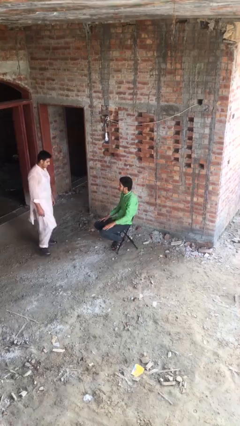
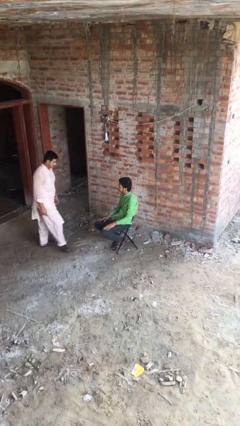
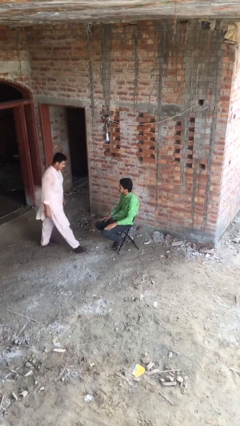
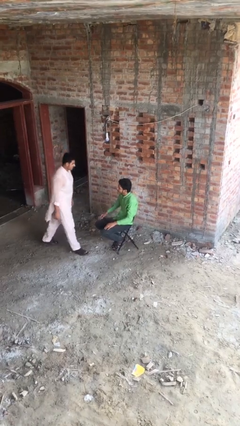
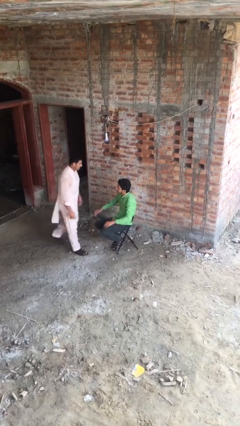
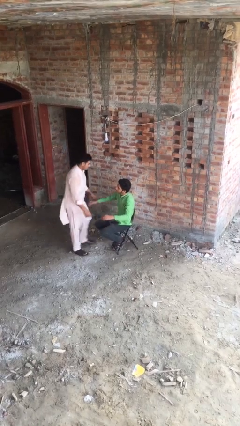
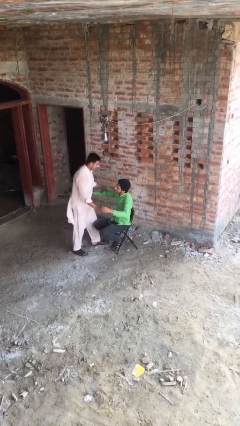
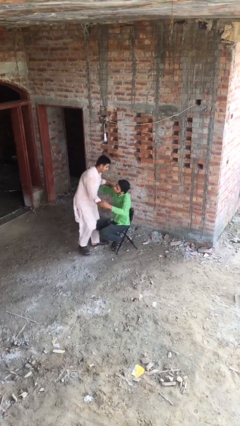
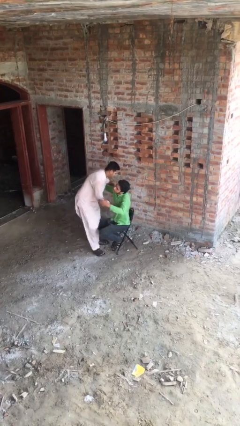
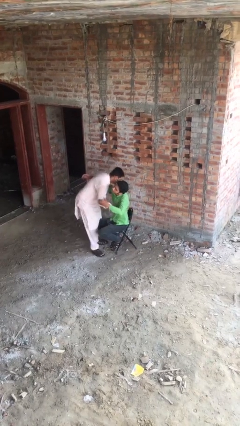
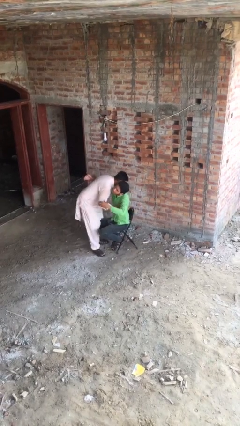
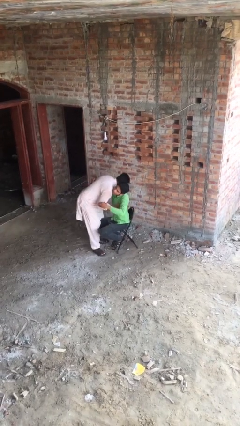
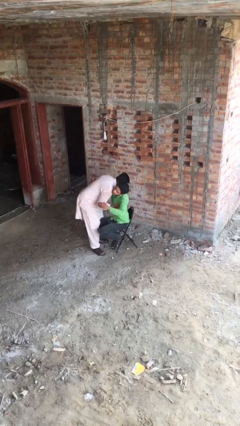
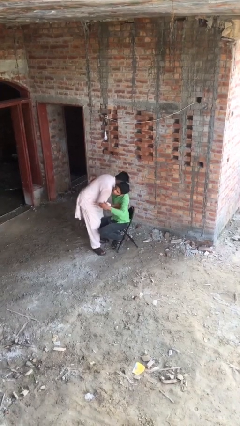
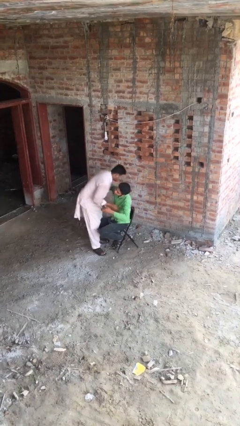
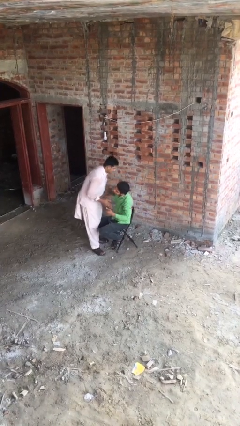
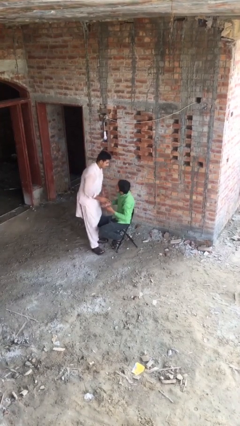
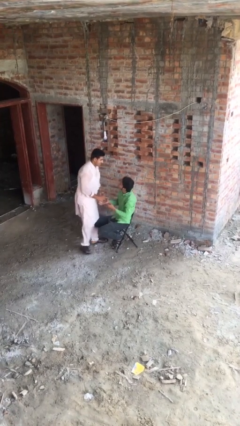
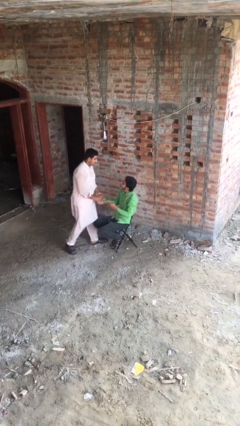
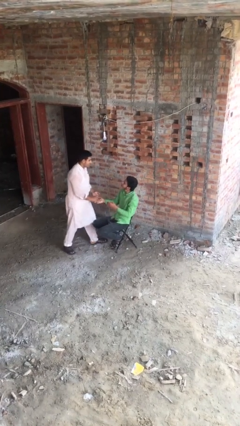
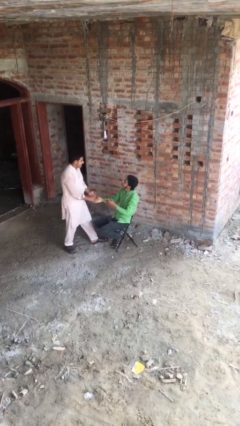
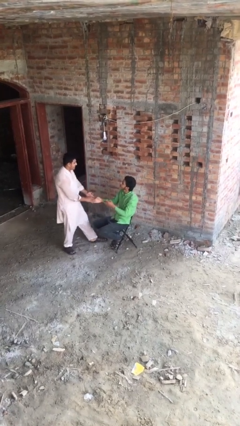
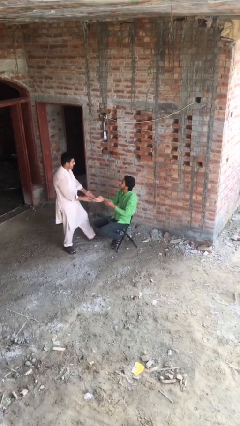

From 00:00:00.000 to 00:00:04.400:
person embraces person

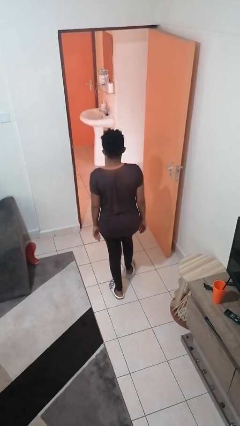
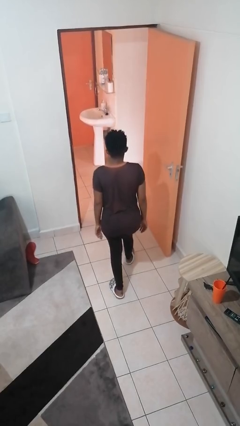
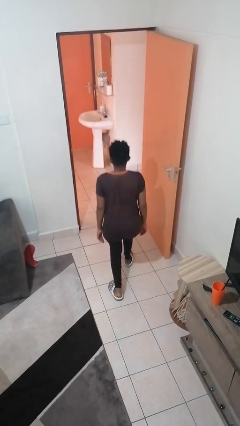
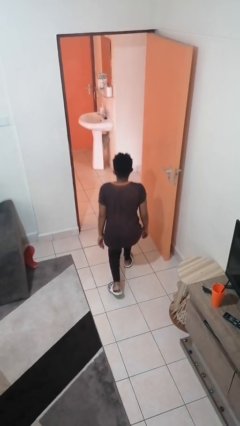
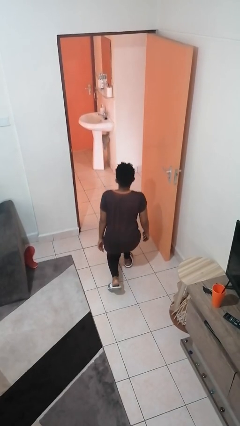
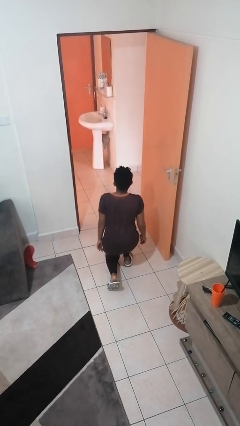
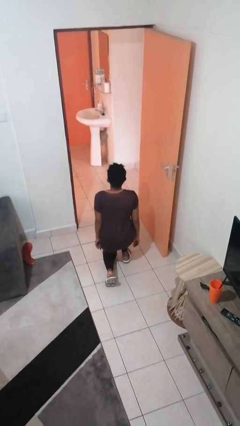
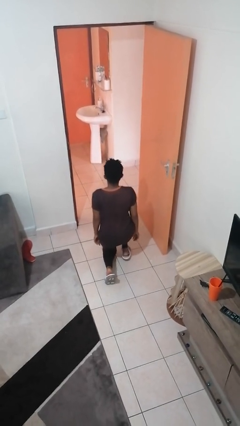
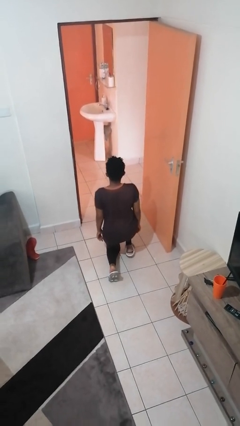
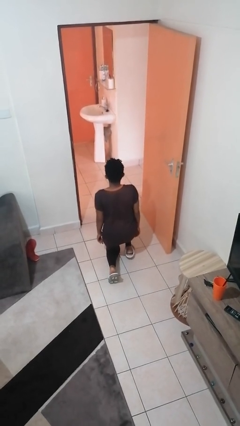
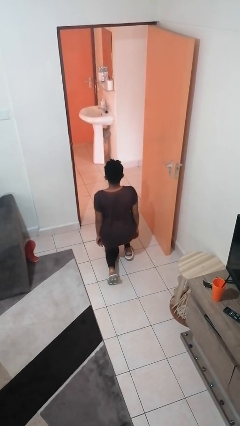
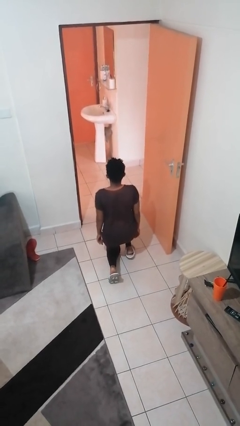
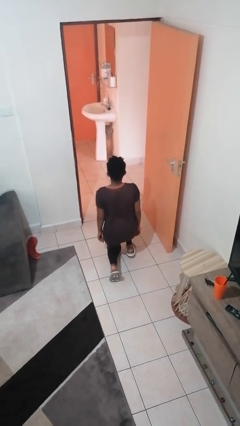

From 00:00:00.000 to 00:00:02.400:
person kneels

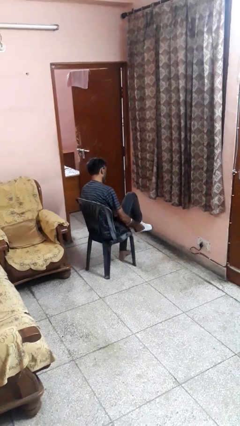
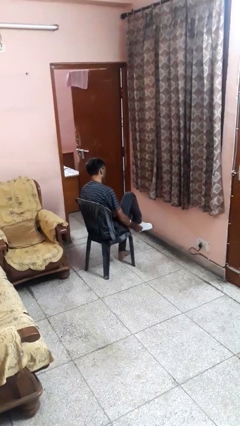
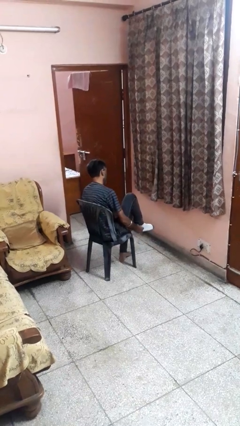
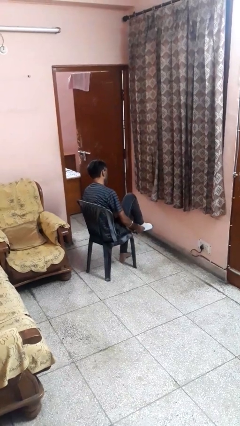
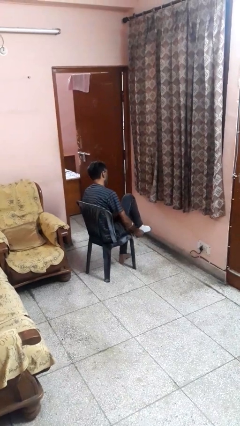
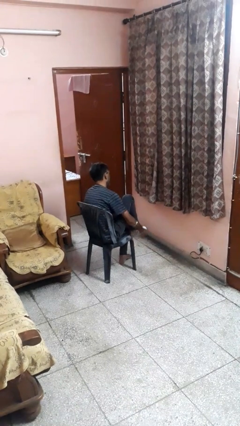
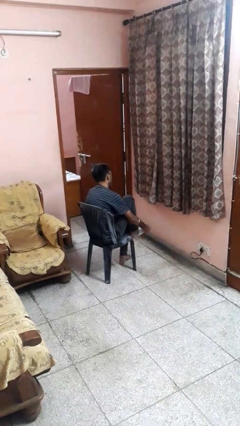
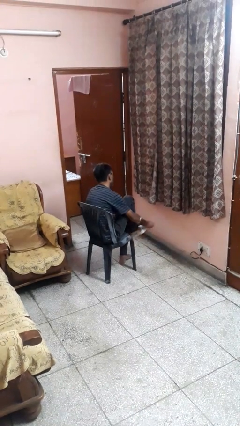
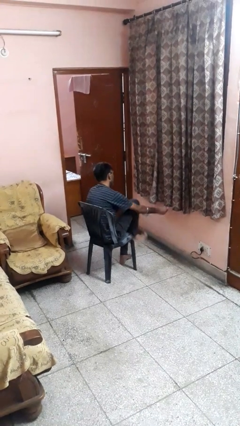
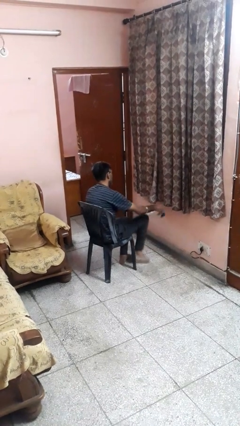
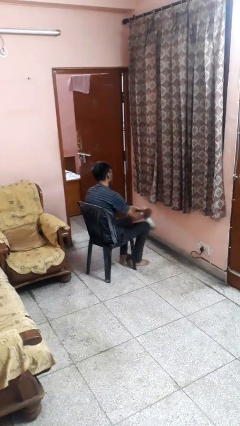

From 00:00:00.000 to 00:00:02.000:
person takes off socks

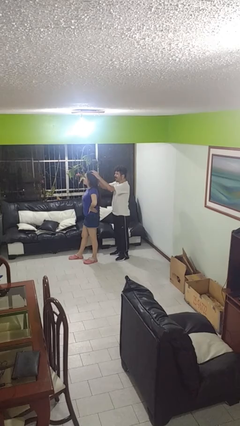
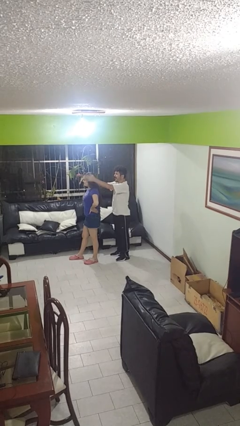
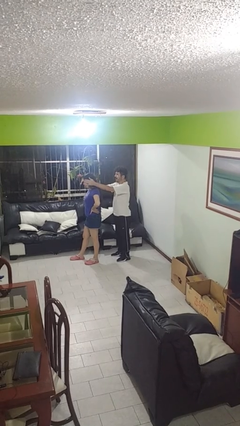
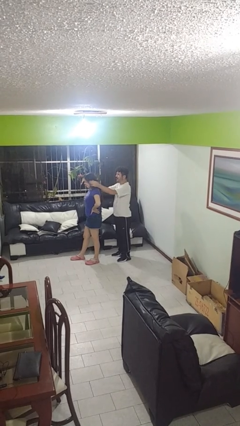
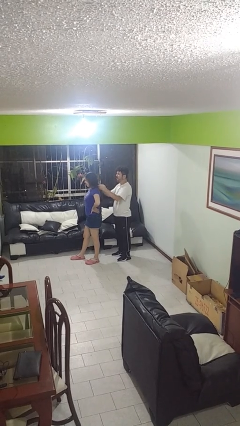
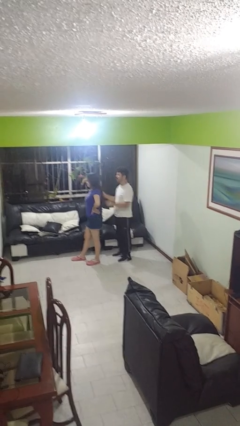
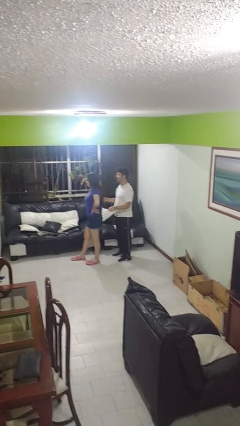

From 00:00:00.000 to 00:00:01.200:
person grabs person by hair

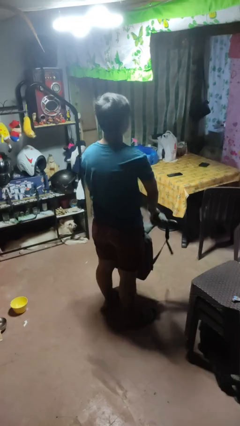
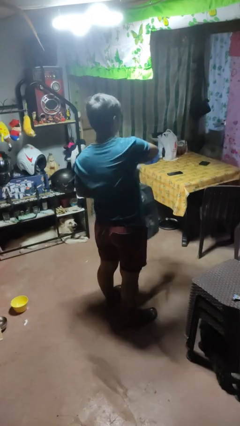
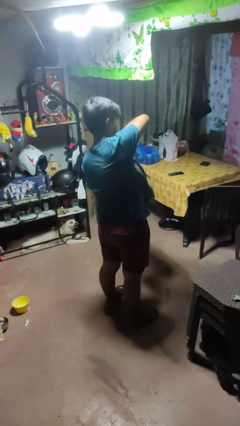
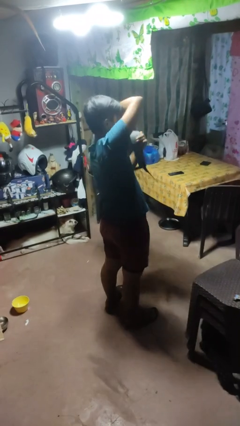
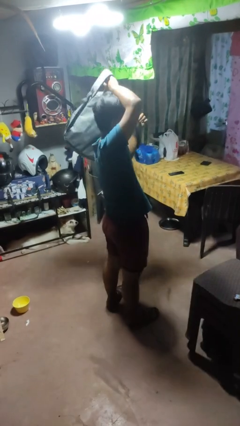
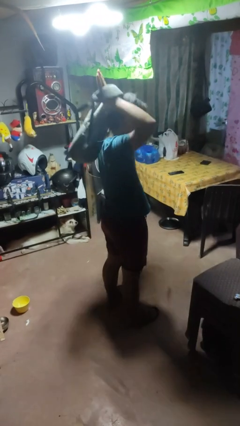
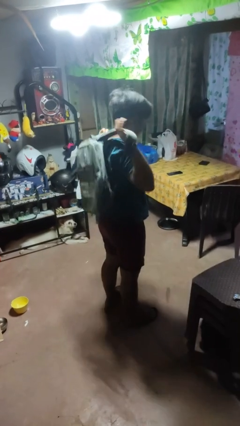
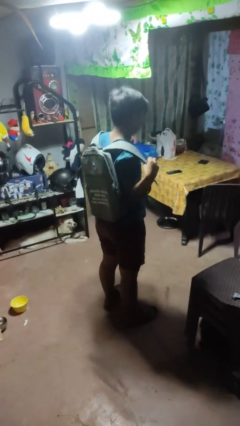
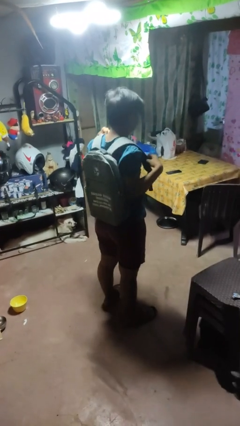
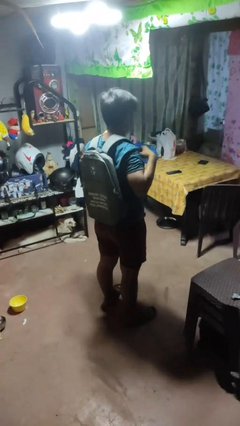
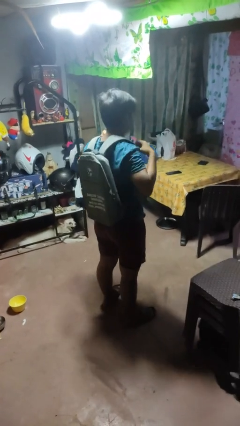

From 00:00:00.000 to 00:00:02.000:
person puts on backpack

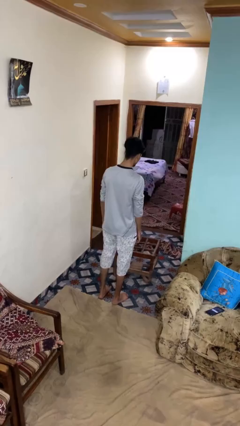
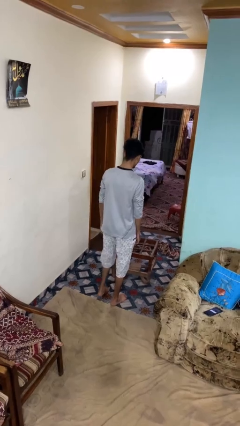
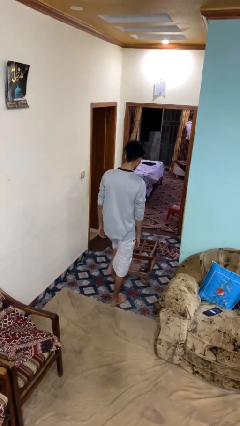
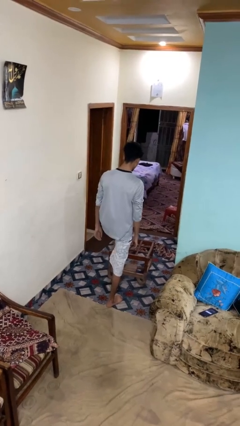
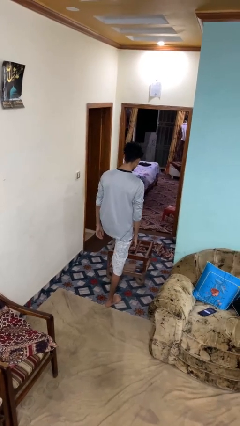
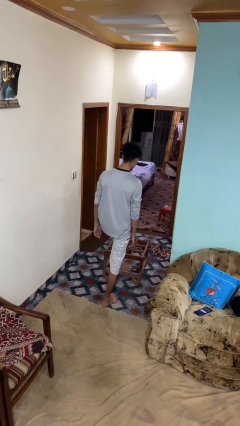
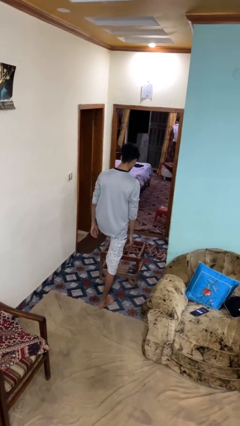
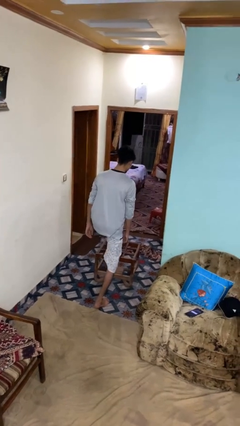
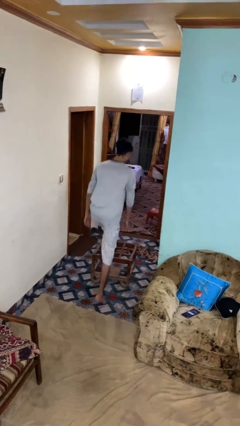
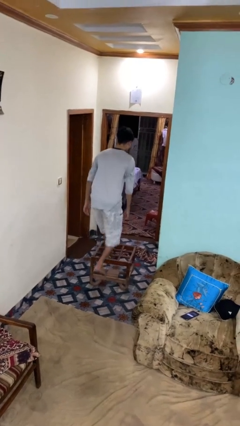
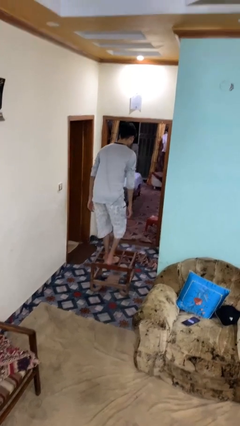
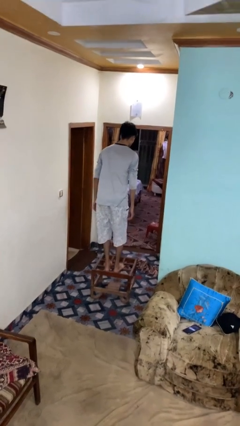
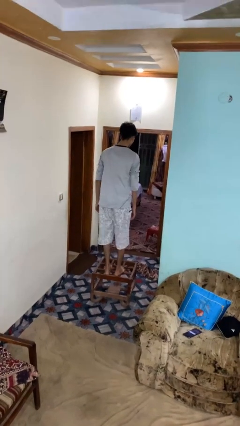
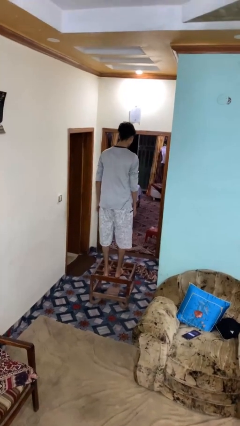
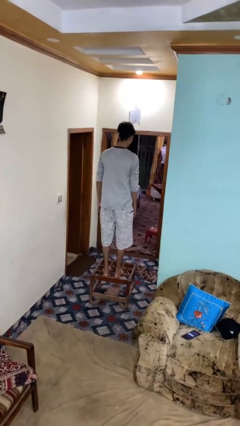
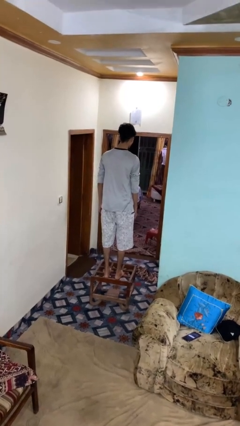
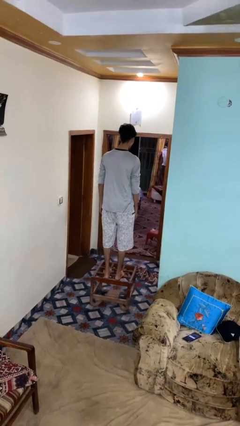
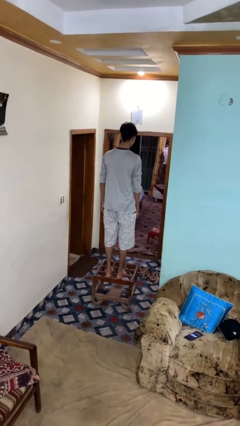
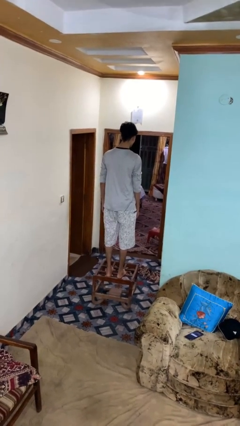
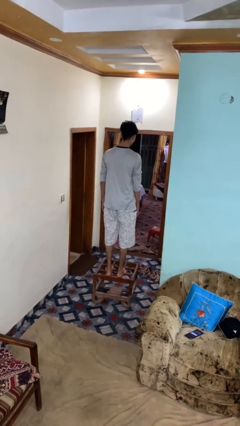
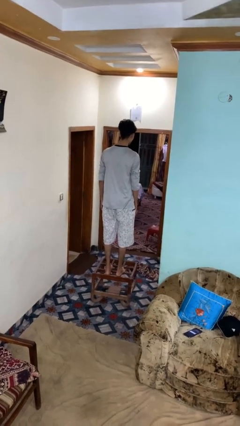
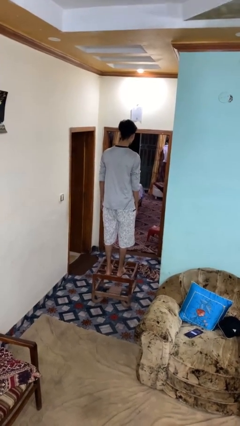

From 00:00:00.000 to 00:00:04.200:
person climbs on table

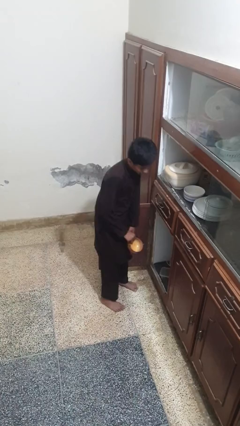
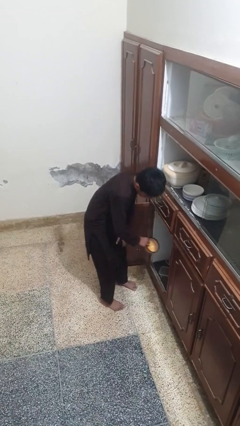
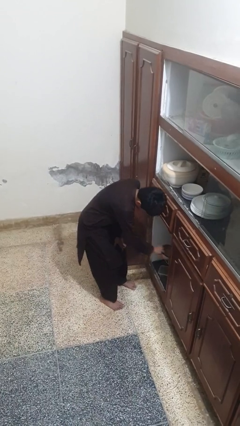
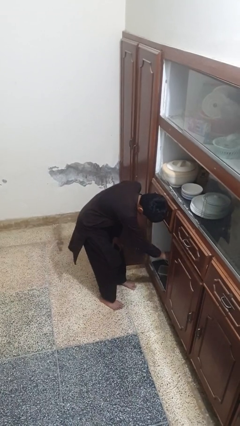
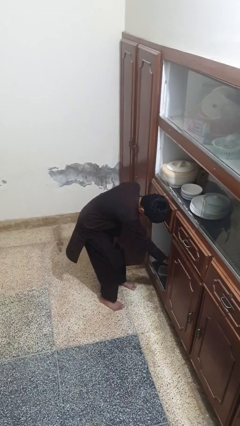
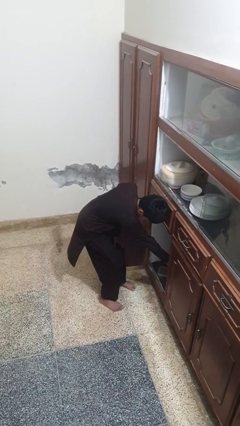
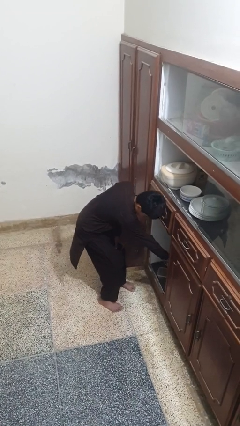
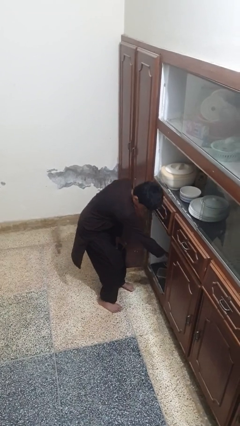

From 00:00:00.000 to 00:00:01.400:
person puts object in cabinet
